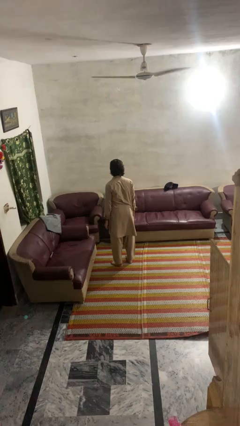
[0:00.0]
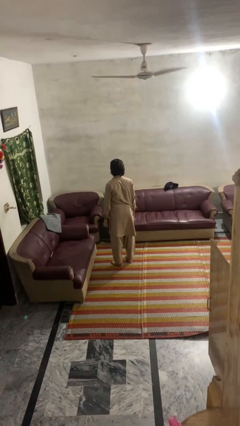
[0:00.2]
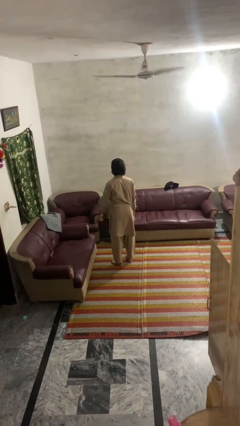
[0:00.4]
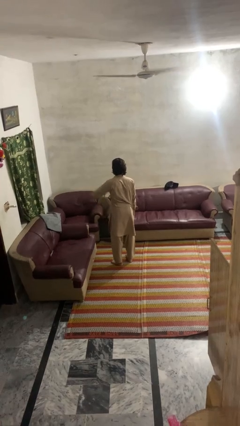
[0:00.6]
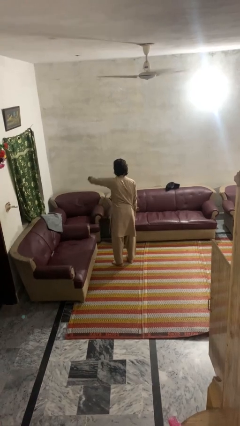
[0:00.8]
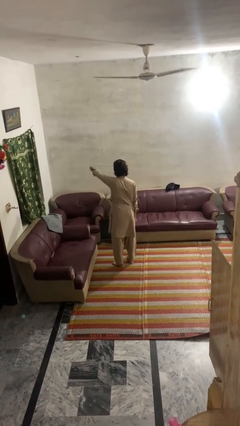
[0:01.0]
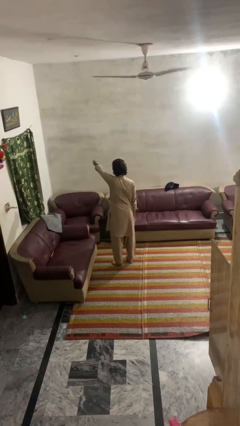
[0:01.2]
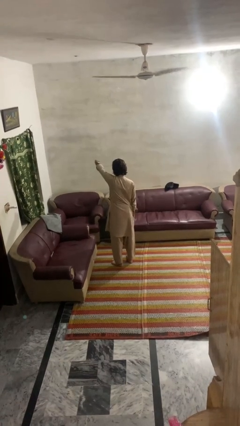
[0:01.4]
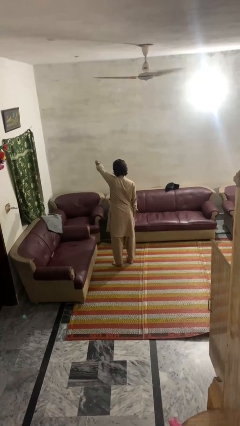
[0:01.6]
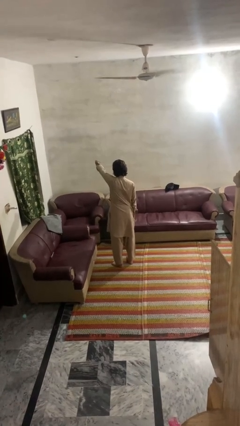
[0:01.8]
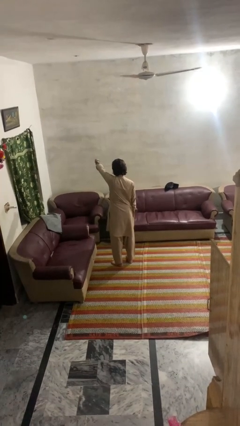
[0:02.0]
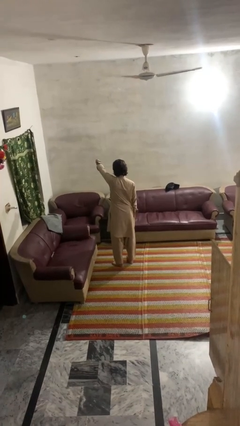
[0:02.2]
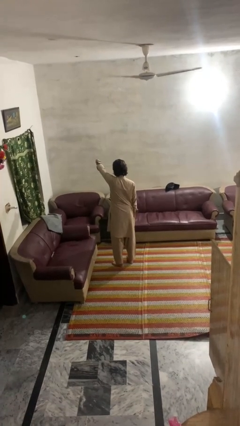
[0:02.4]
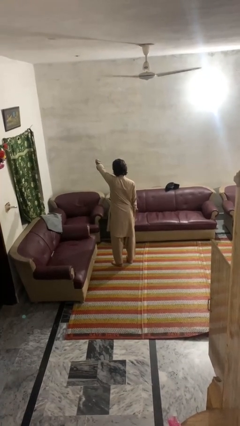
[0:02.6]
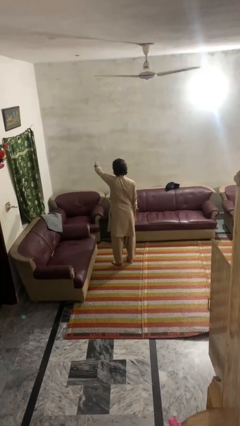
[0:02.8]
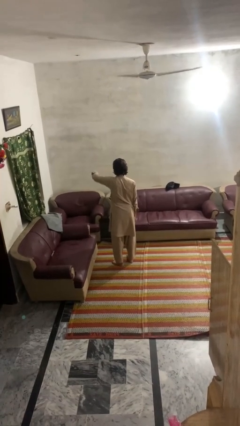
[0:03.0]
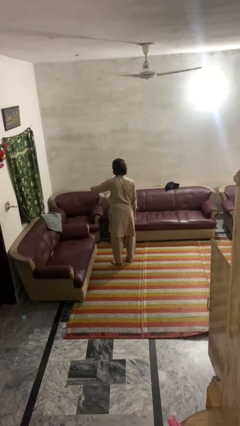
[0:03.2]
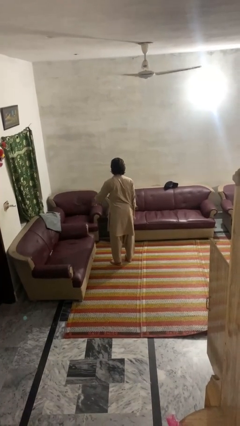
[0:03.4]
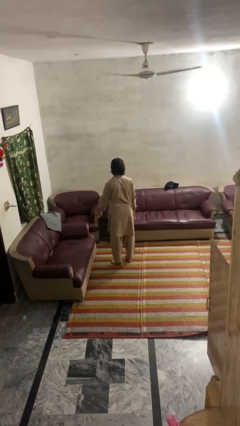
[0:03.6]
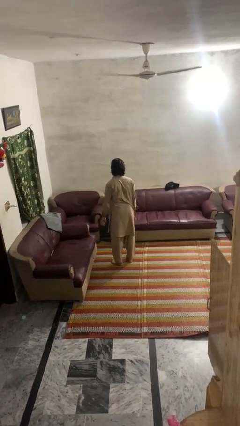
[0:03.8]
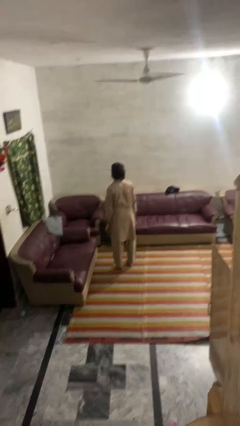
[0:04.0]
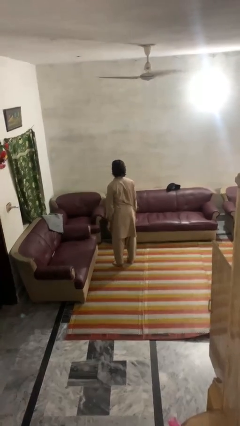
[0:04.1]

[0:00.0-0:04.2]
person gestures thumbs down

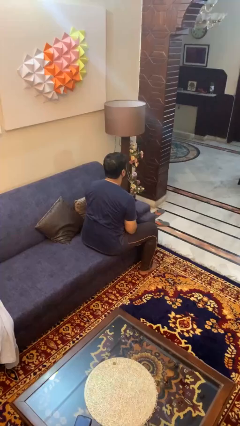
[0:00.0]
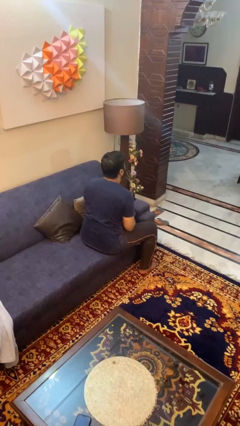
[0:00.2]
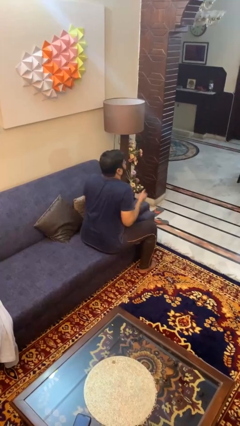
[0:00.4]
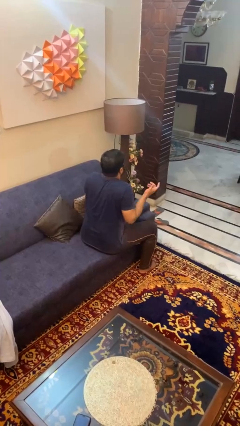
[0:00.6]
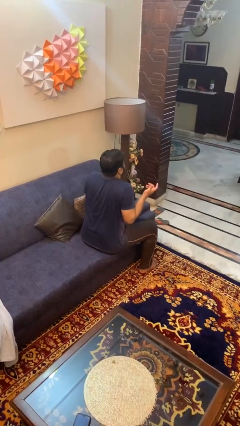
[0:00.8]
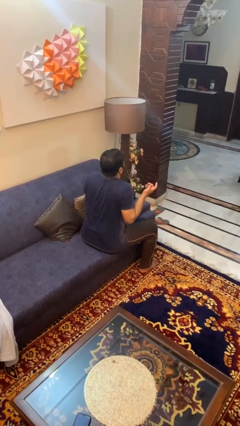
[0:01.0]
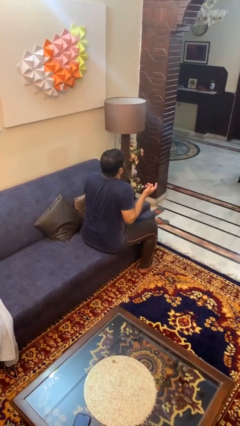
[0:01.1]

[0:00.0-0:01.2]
person shrugs

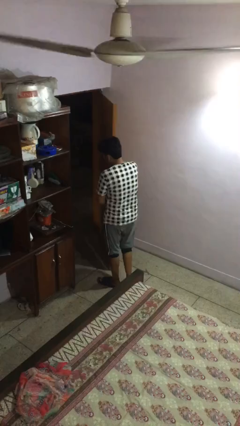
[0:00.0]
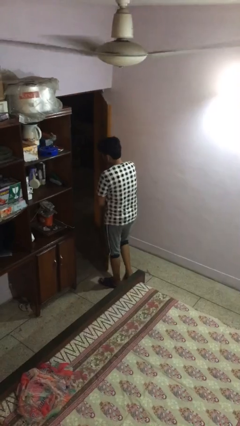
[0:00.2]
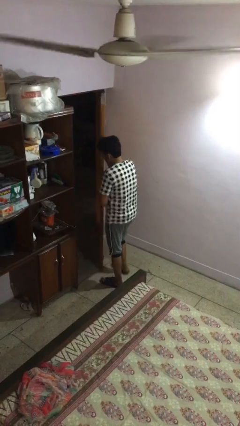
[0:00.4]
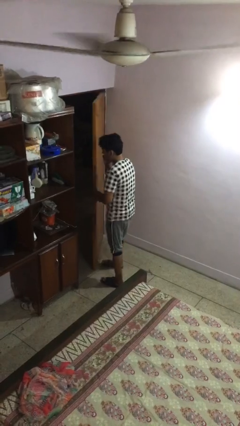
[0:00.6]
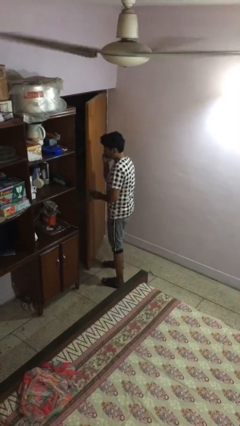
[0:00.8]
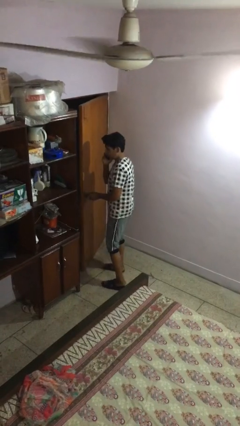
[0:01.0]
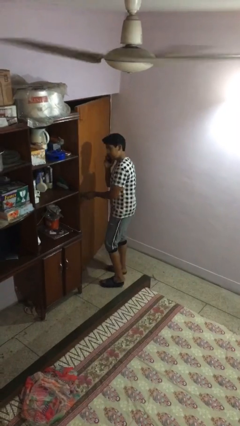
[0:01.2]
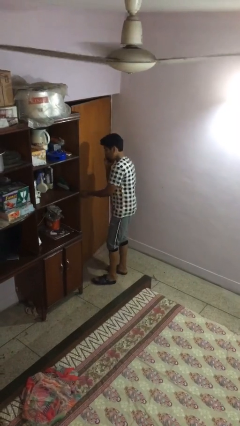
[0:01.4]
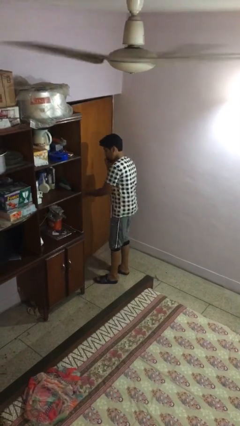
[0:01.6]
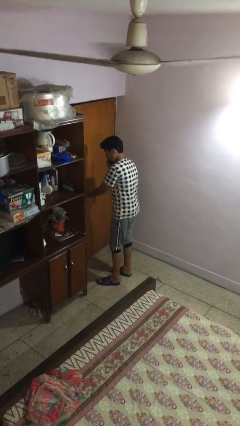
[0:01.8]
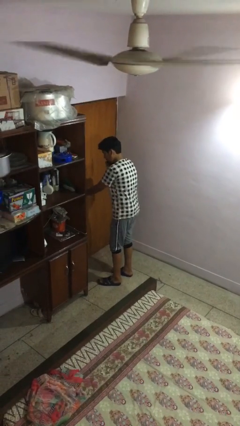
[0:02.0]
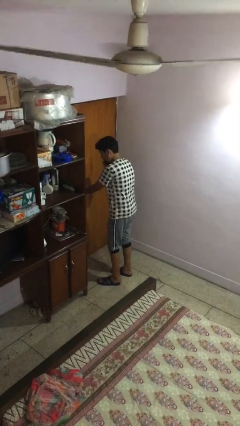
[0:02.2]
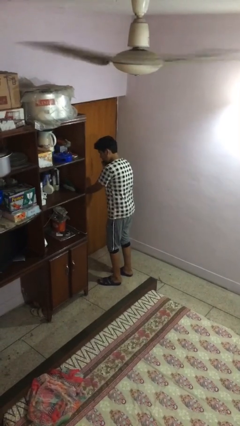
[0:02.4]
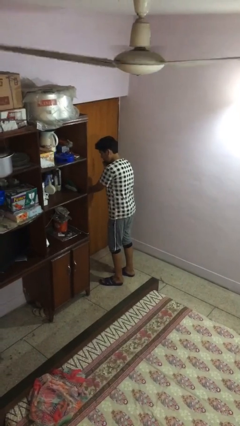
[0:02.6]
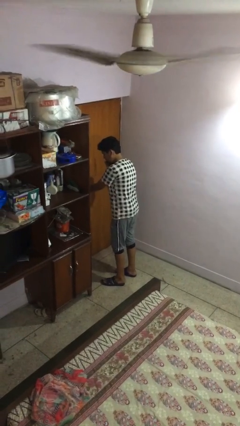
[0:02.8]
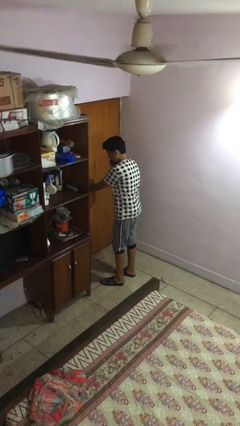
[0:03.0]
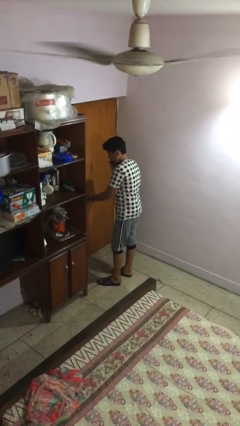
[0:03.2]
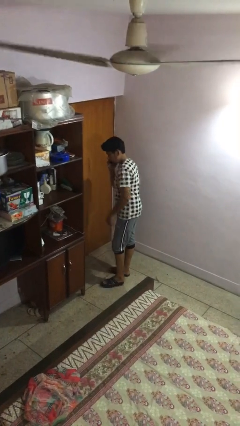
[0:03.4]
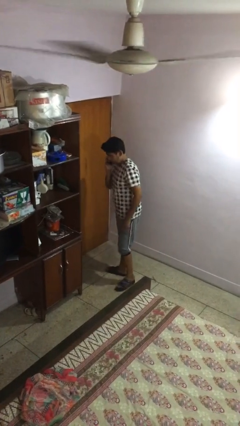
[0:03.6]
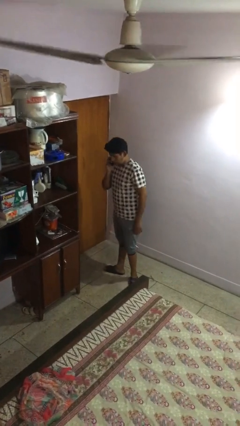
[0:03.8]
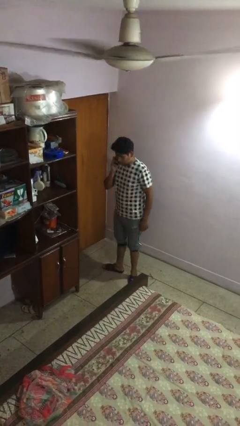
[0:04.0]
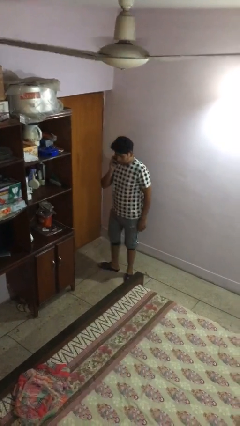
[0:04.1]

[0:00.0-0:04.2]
person closes facility door

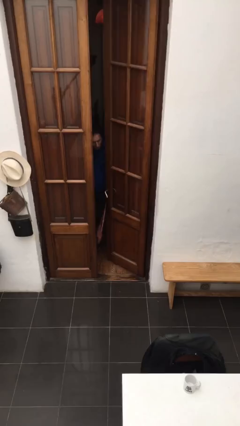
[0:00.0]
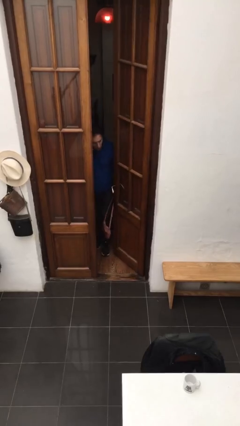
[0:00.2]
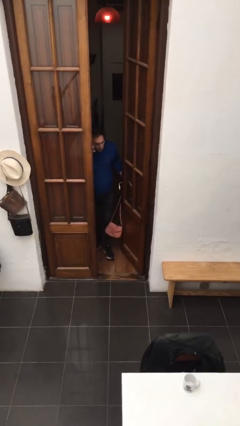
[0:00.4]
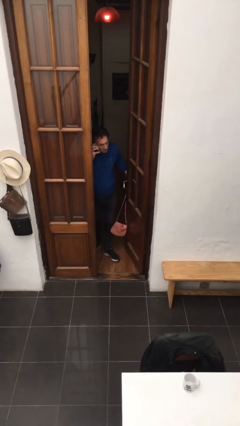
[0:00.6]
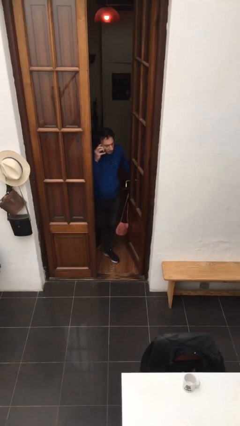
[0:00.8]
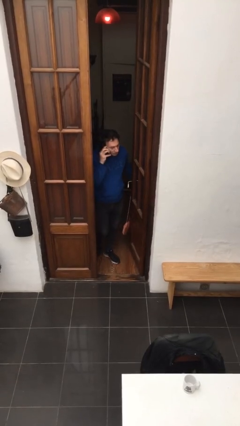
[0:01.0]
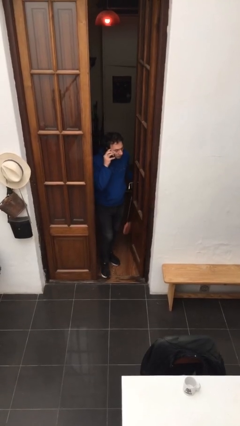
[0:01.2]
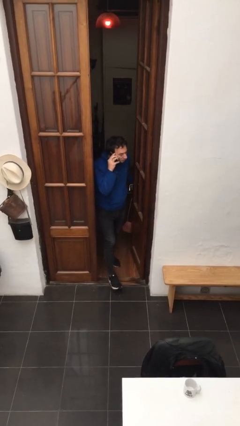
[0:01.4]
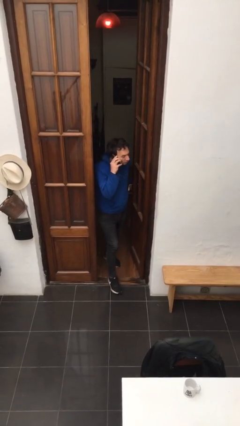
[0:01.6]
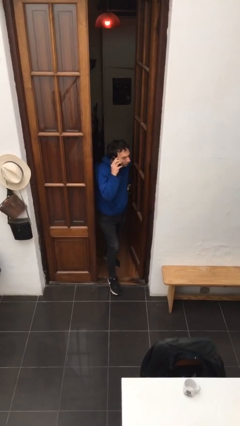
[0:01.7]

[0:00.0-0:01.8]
person opens facility door

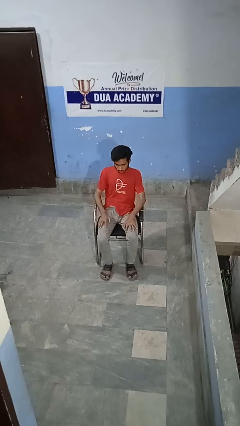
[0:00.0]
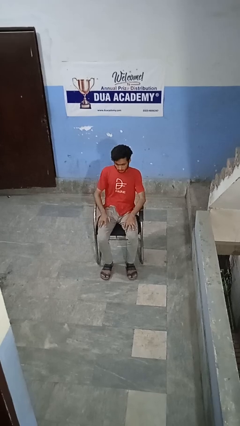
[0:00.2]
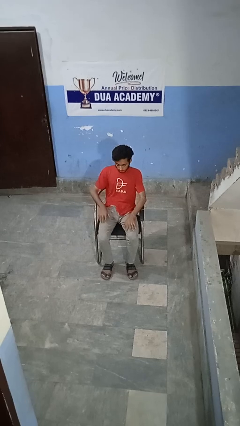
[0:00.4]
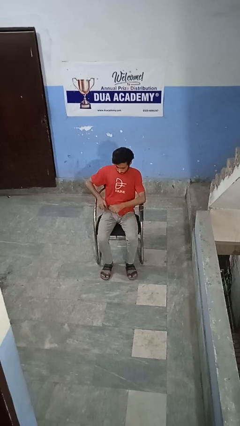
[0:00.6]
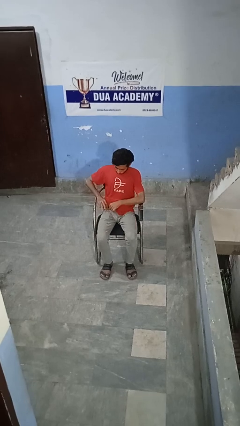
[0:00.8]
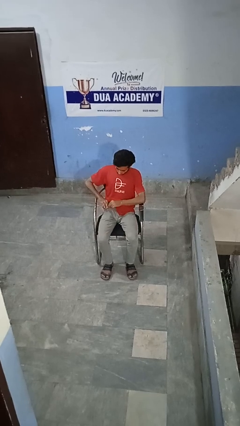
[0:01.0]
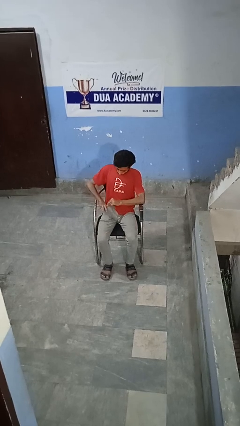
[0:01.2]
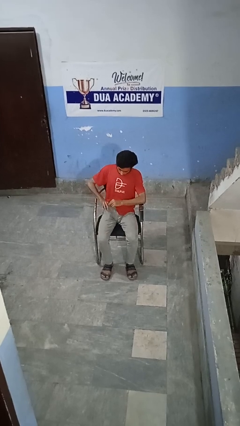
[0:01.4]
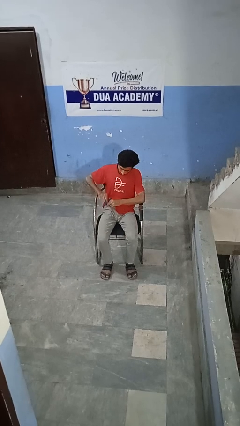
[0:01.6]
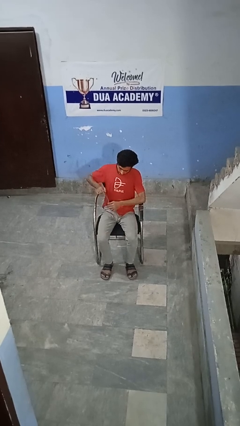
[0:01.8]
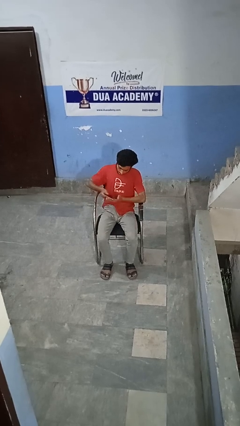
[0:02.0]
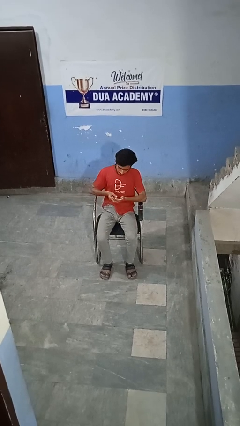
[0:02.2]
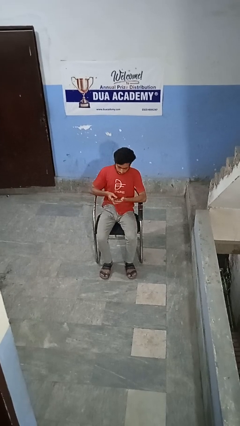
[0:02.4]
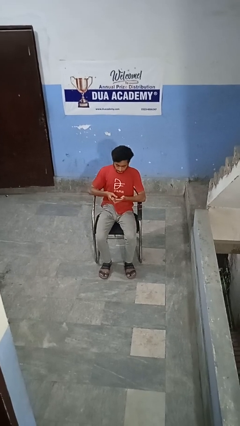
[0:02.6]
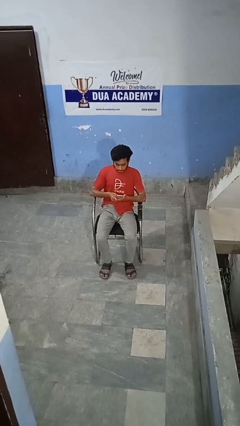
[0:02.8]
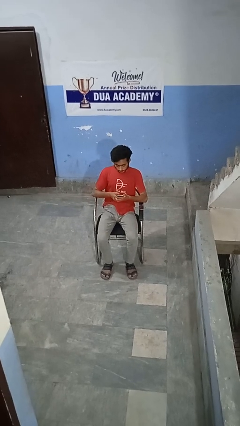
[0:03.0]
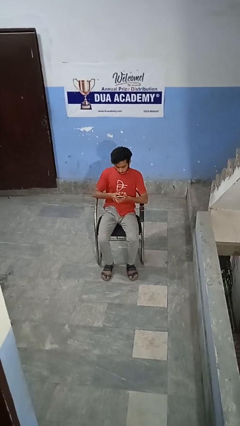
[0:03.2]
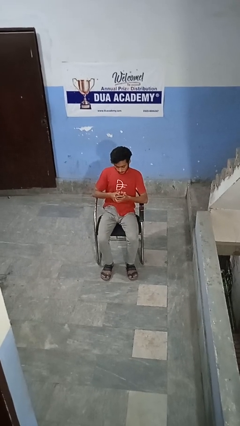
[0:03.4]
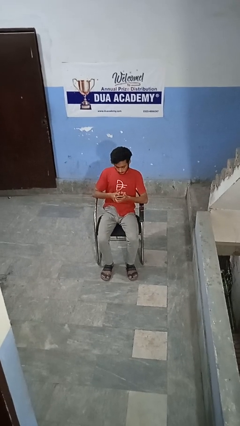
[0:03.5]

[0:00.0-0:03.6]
person takes phone from pocket

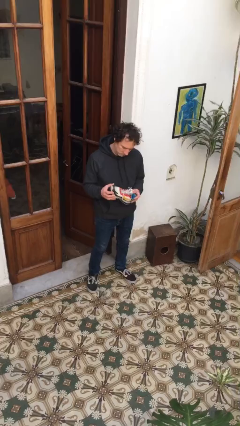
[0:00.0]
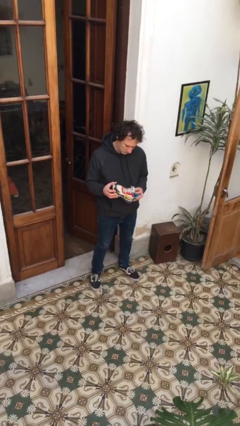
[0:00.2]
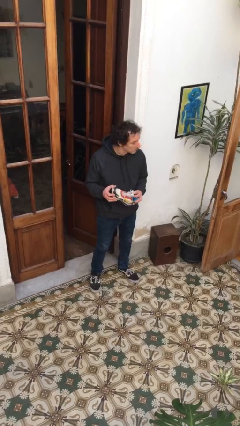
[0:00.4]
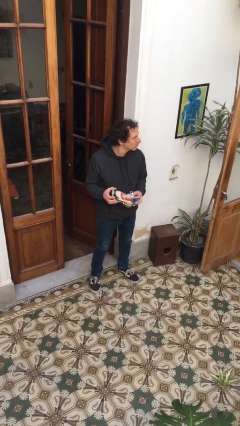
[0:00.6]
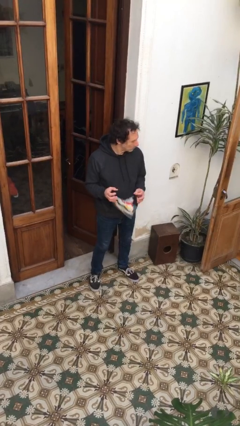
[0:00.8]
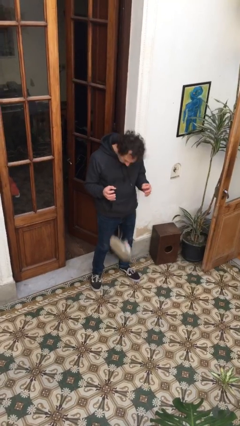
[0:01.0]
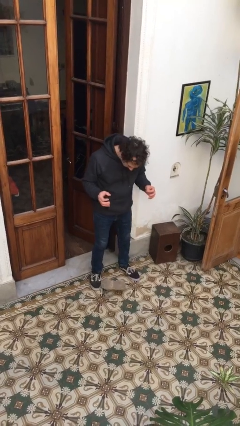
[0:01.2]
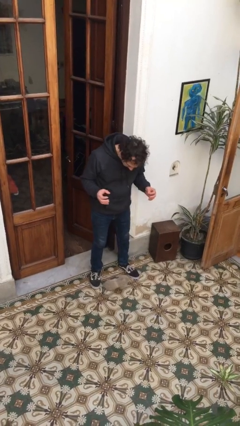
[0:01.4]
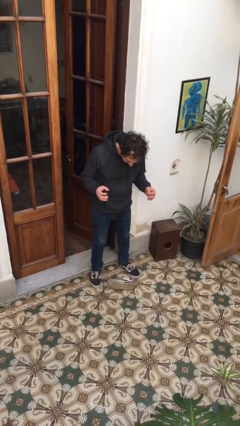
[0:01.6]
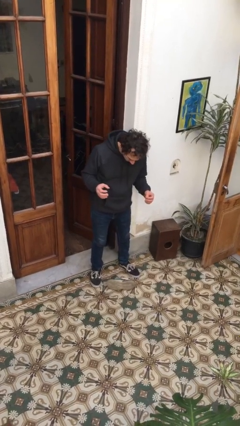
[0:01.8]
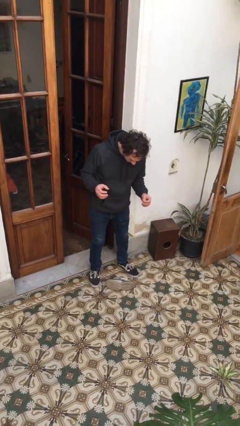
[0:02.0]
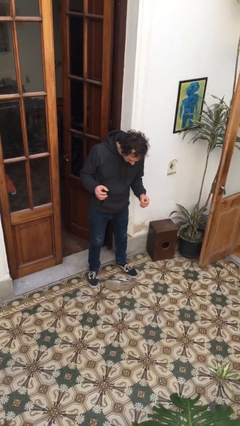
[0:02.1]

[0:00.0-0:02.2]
person drops object

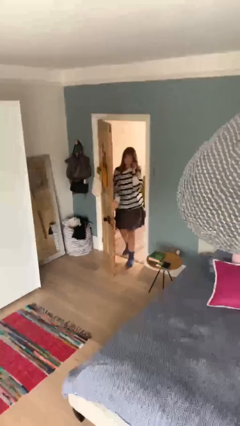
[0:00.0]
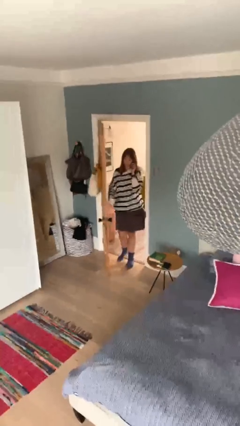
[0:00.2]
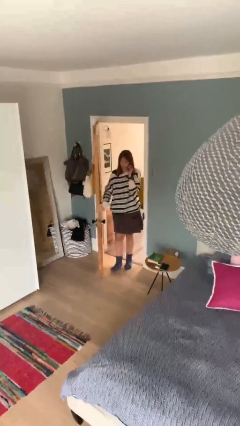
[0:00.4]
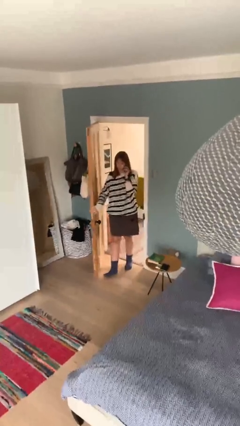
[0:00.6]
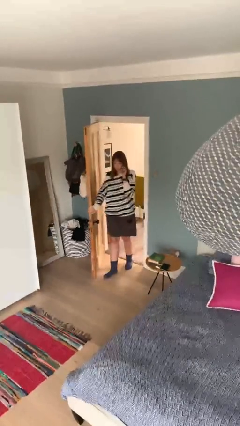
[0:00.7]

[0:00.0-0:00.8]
person enters scene through structure
